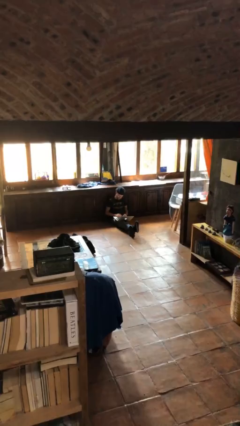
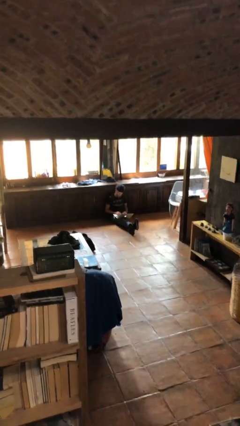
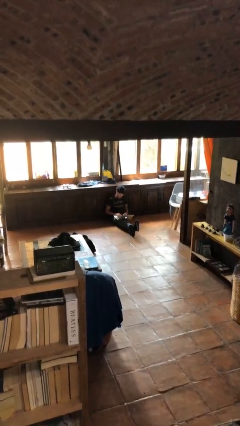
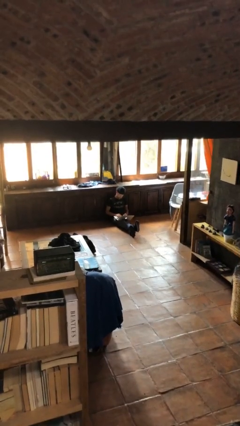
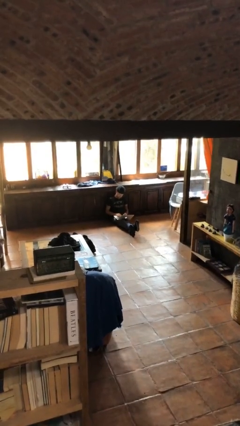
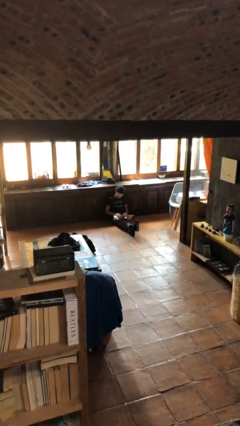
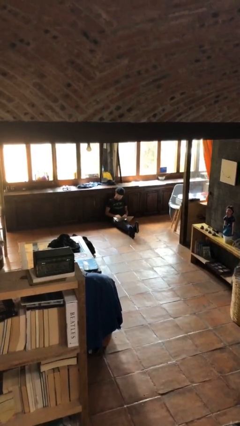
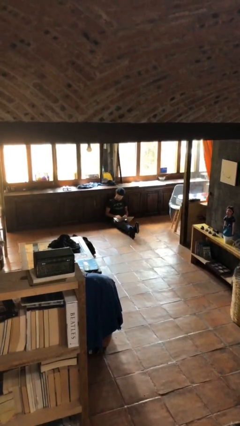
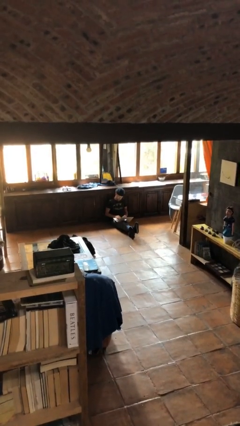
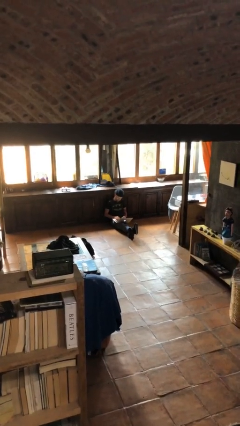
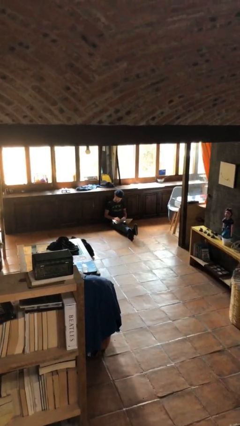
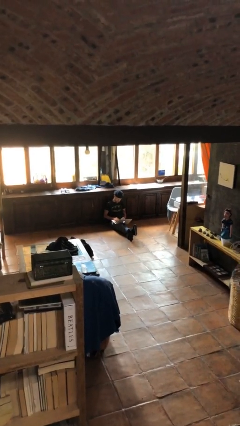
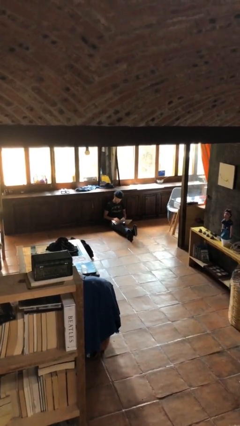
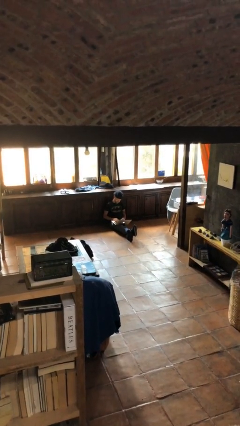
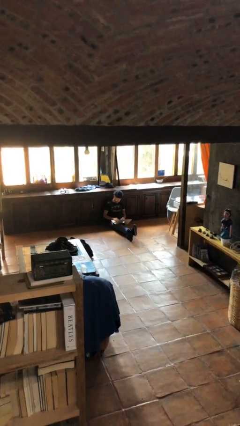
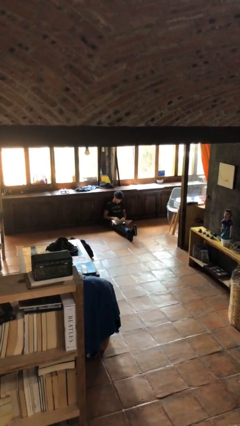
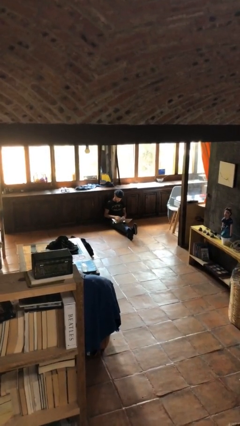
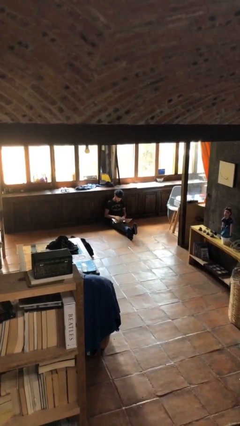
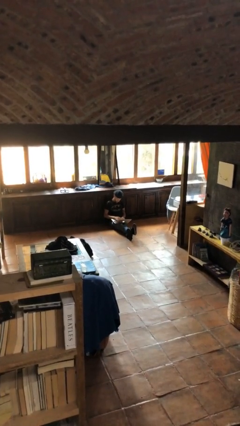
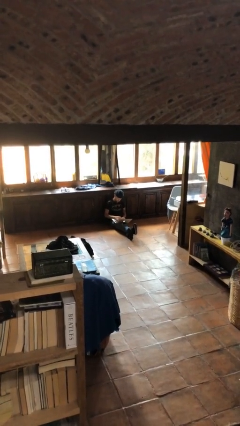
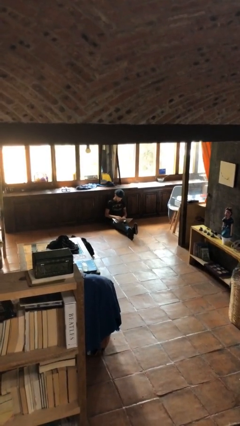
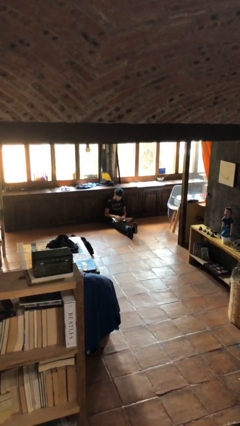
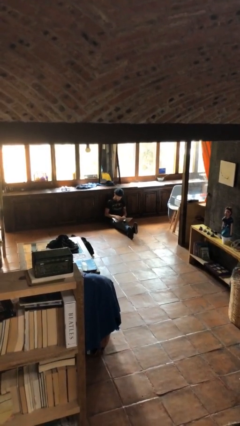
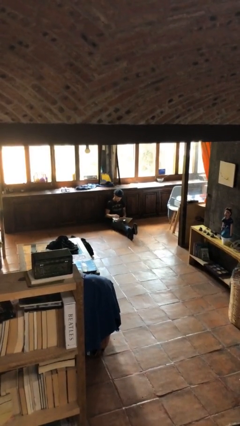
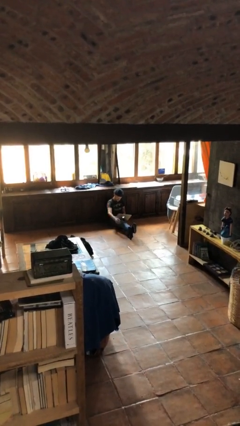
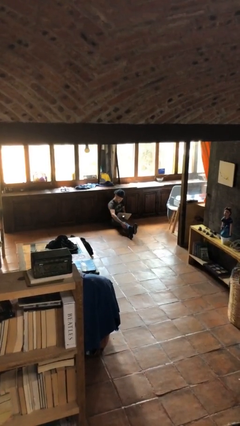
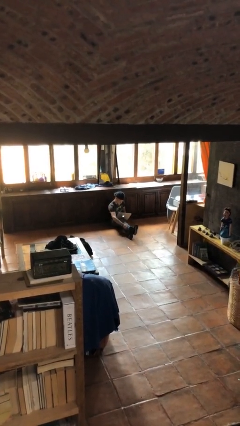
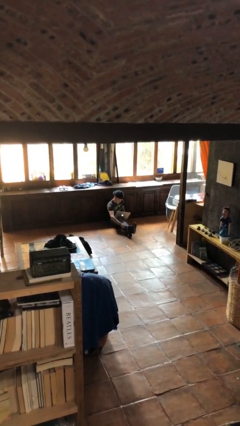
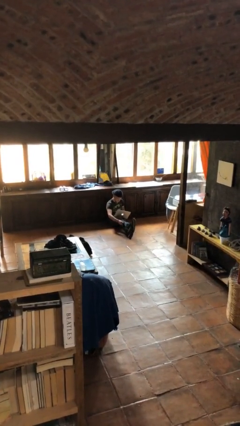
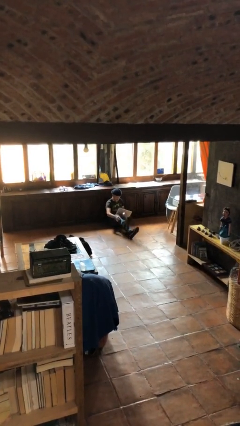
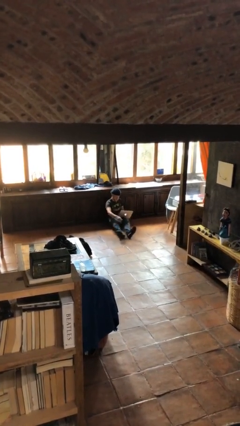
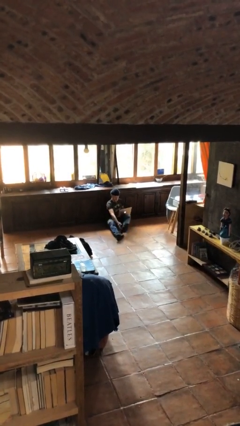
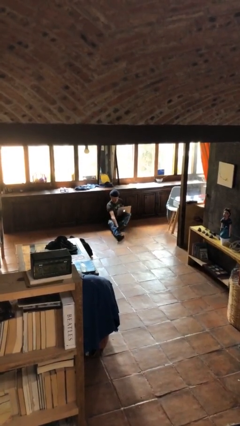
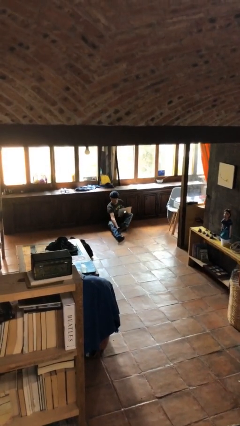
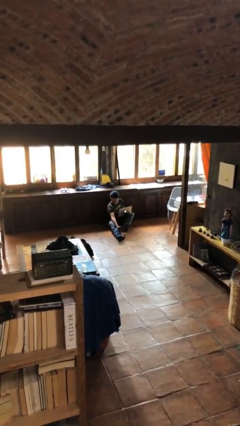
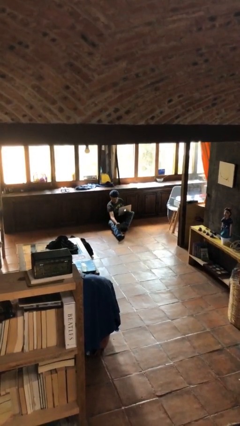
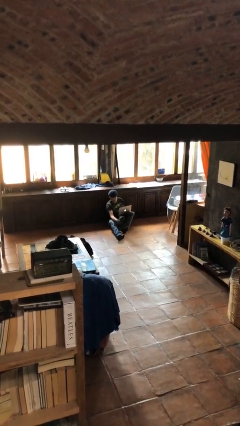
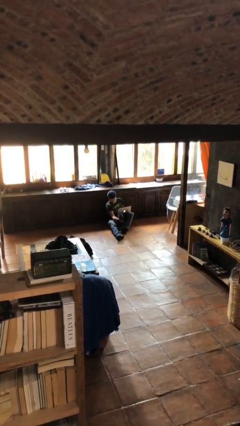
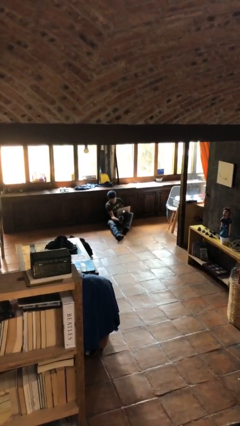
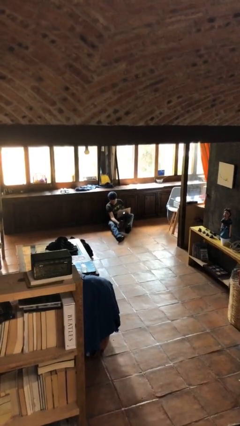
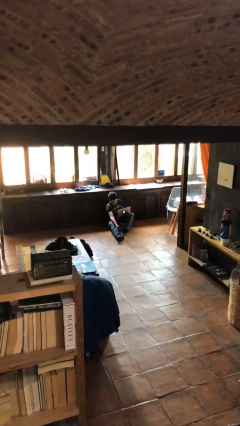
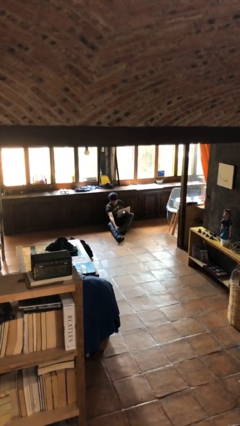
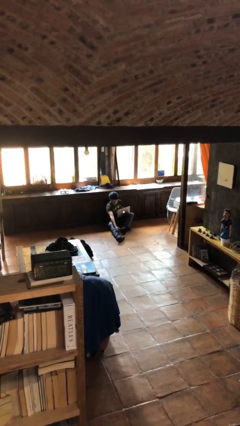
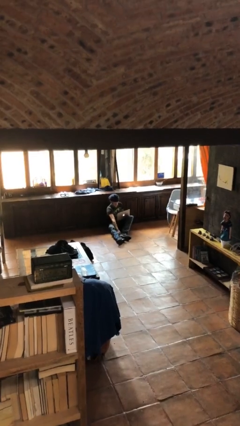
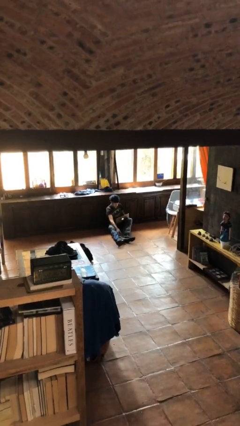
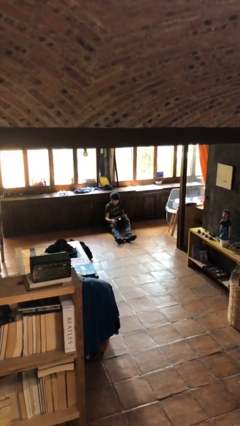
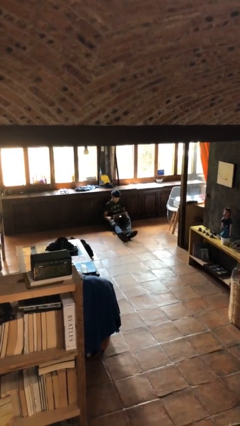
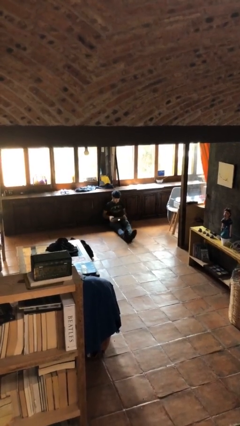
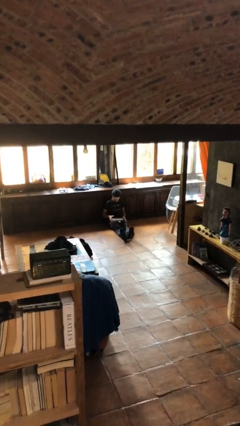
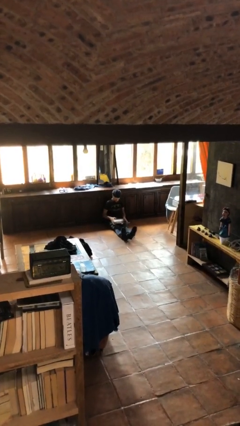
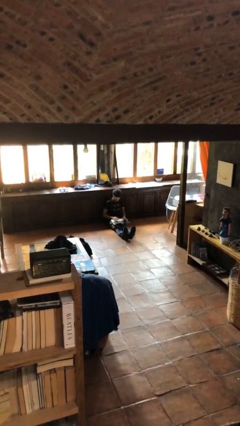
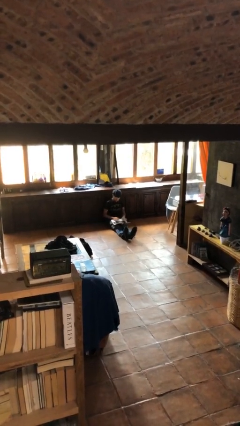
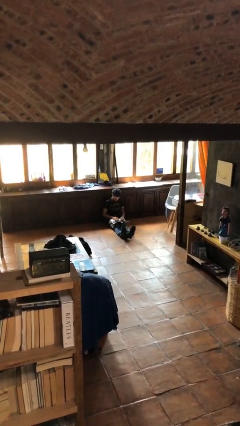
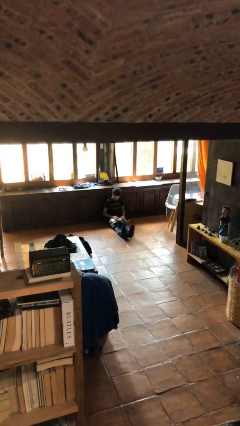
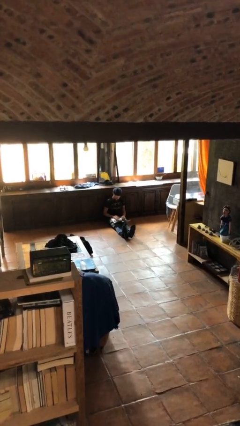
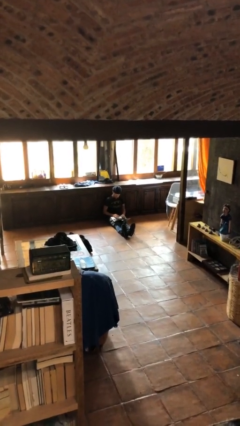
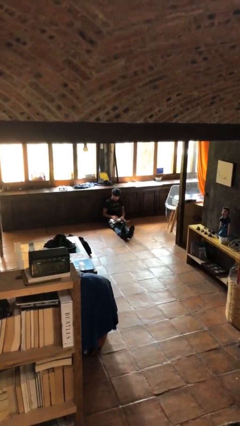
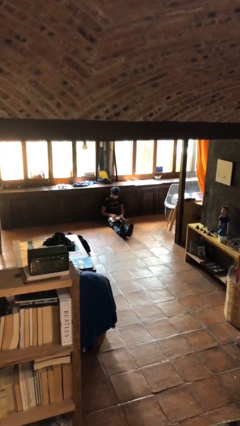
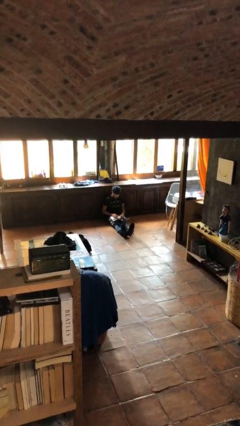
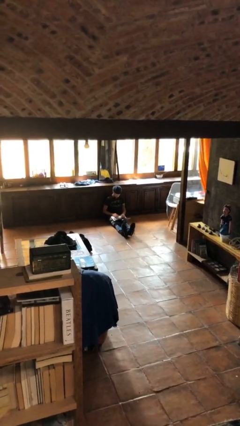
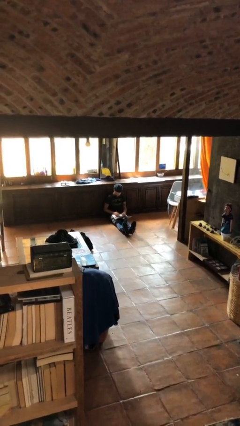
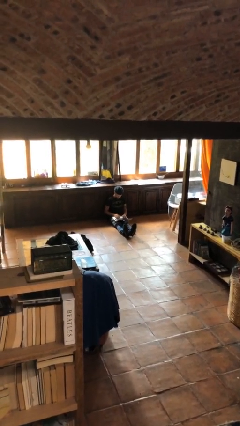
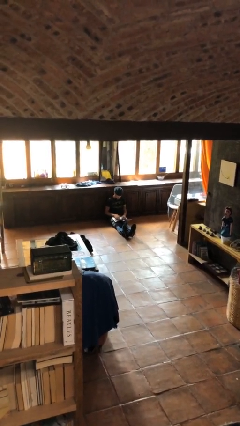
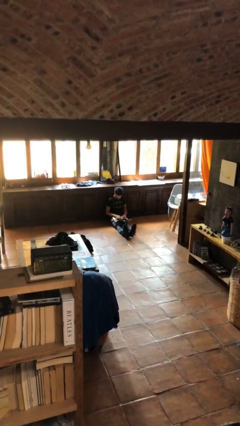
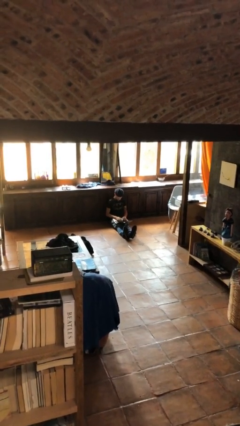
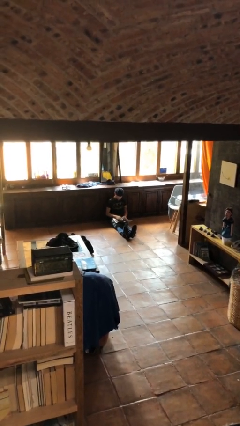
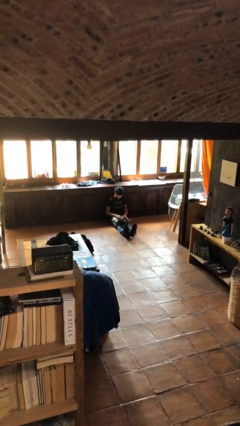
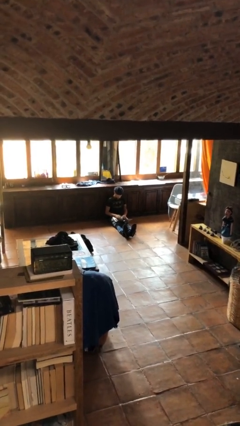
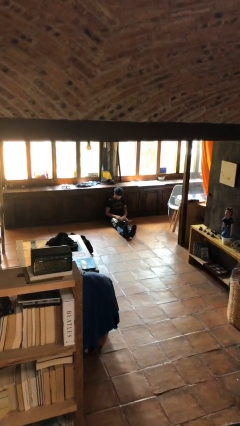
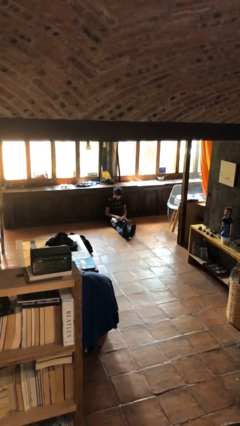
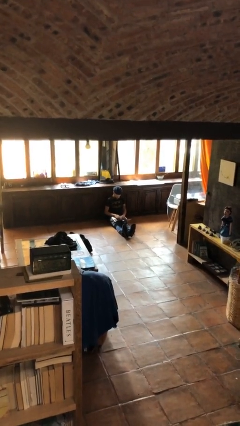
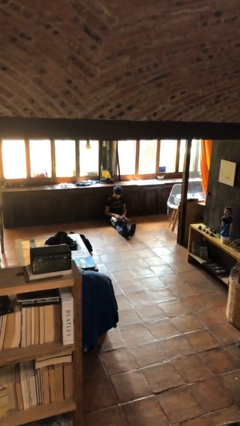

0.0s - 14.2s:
person interacts with laptop

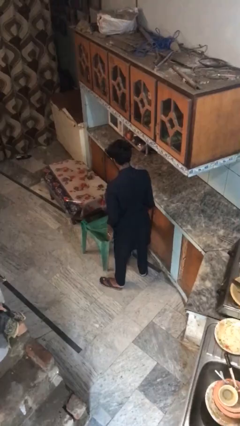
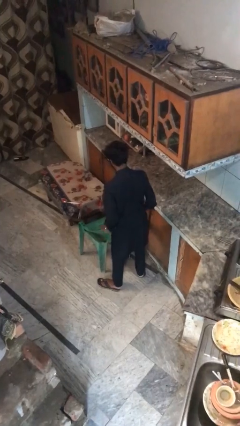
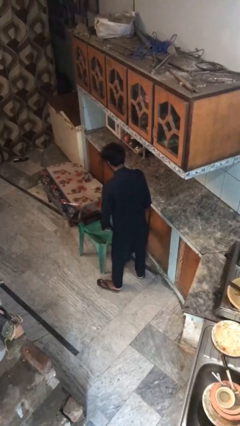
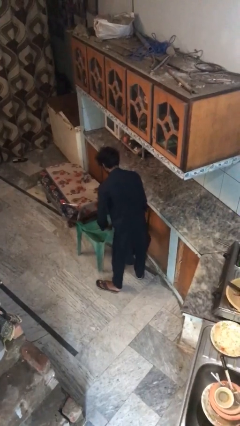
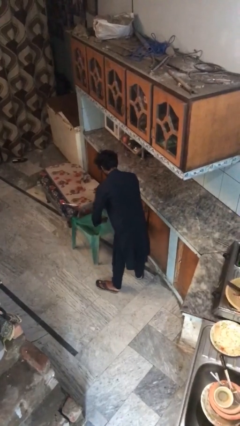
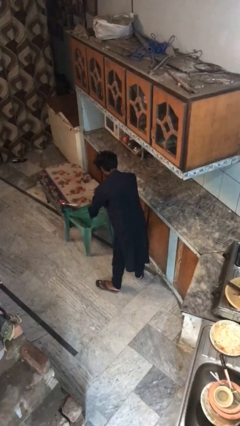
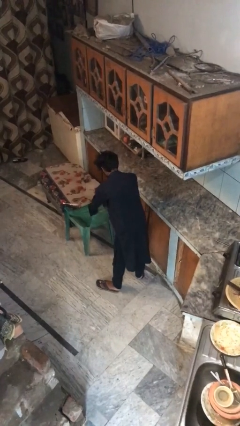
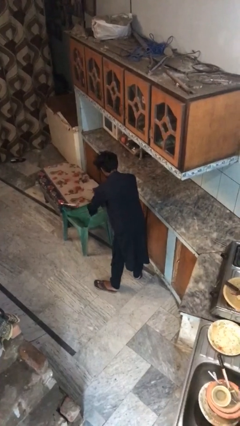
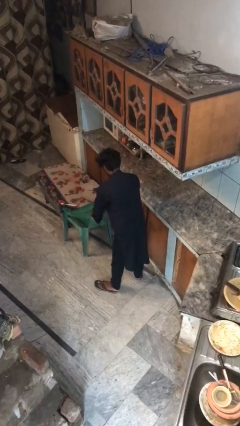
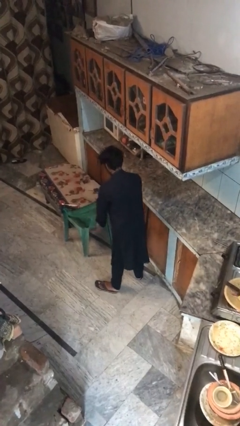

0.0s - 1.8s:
person pushes in chair

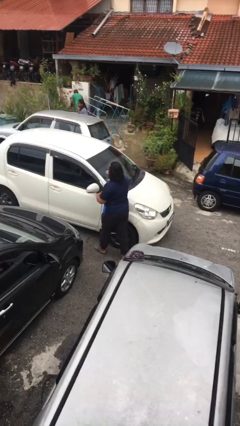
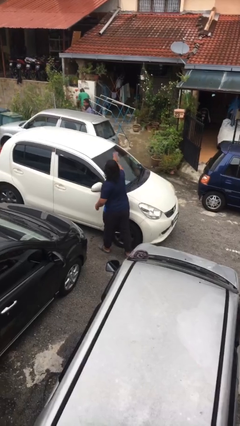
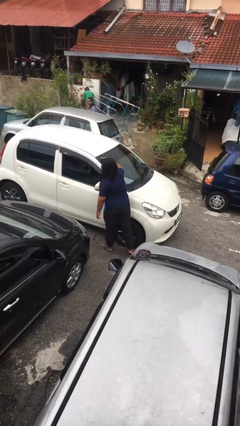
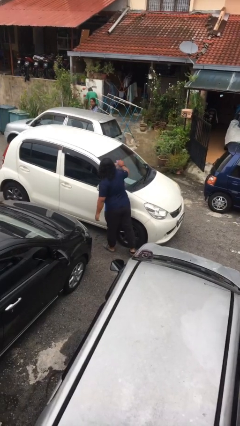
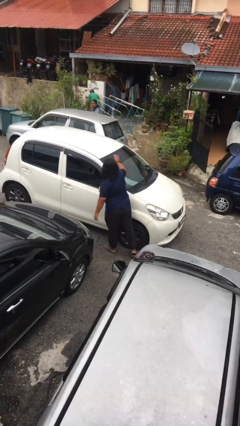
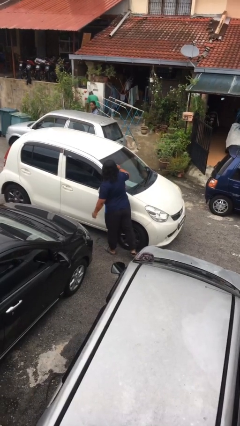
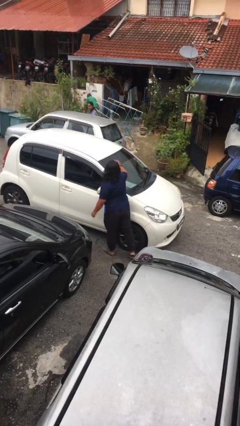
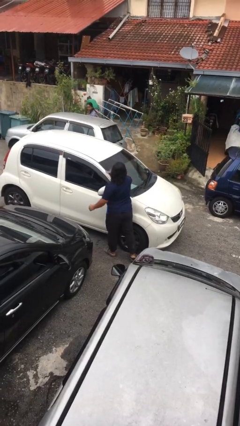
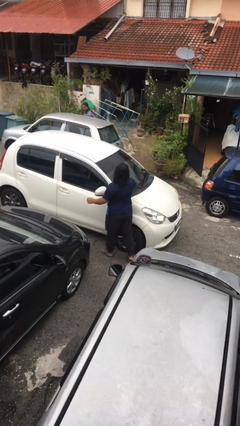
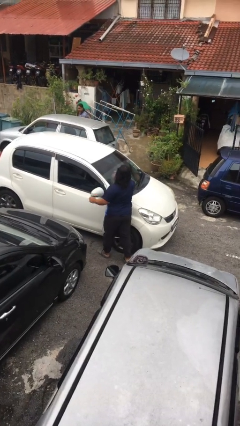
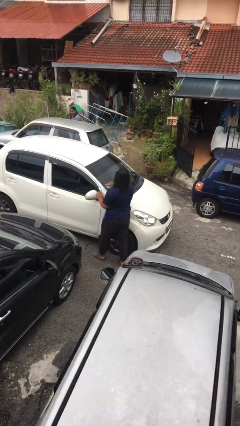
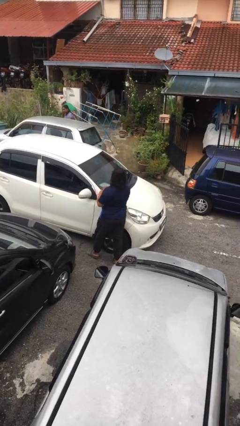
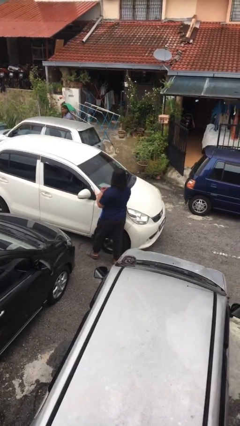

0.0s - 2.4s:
person polishes car with rag
